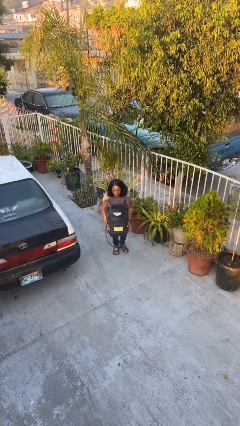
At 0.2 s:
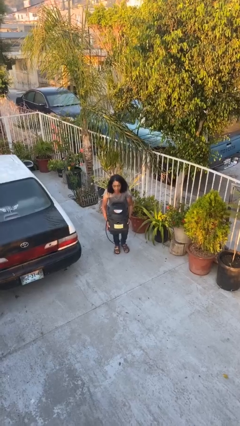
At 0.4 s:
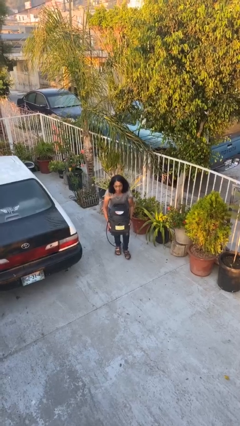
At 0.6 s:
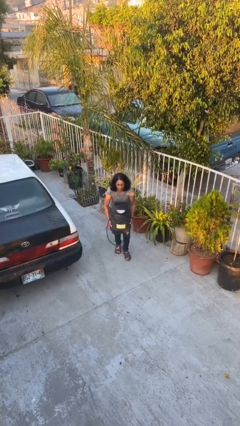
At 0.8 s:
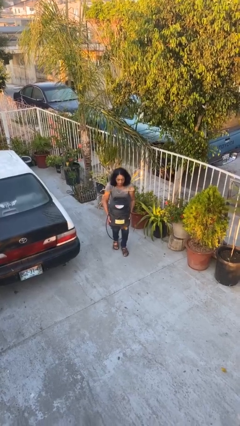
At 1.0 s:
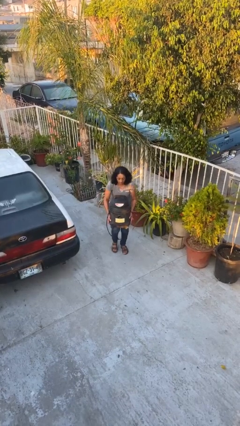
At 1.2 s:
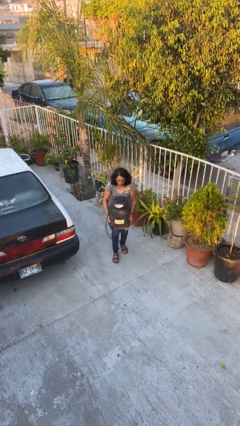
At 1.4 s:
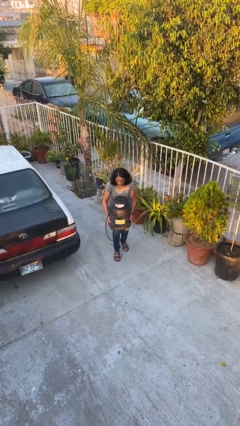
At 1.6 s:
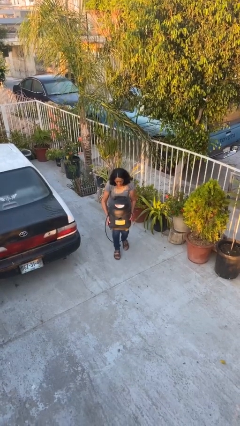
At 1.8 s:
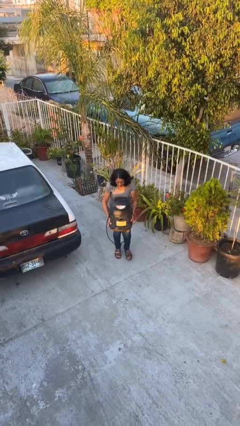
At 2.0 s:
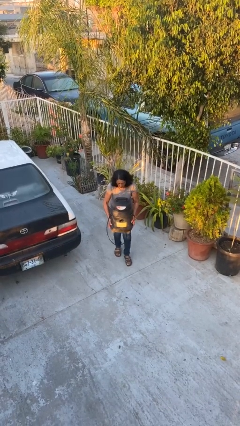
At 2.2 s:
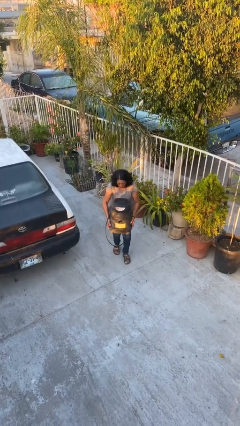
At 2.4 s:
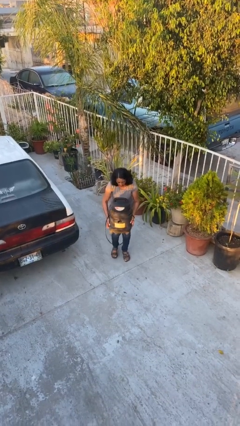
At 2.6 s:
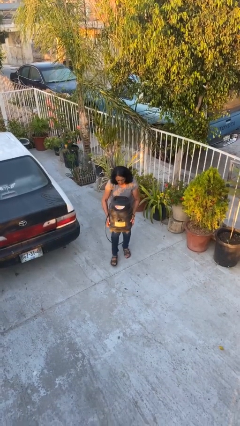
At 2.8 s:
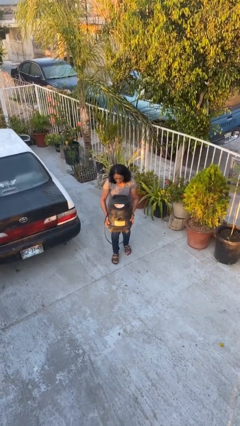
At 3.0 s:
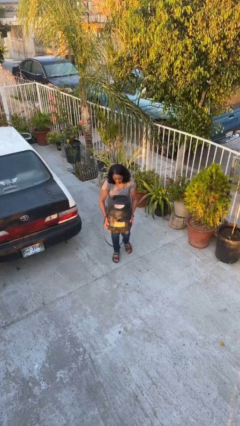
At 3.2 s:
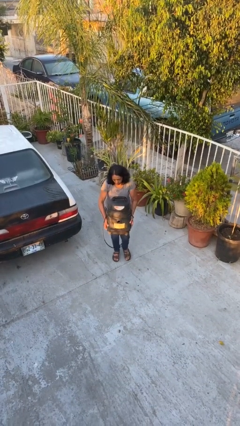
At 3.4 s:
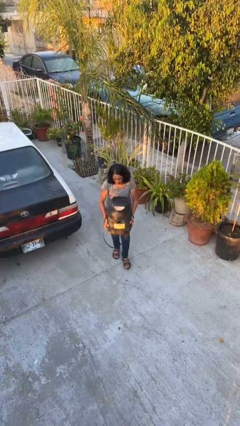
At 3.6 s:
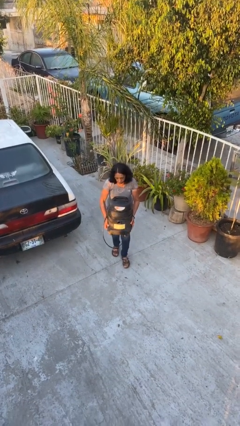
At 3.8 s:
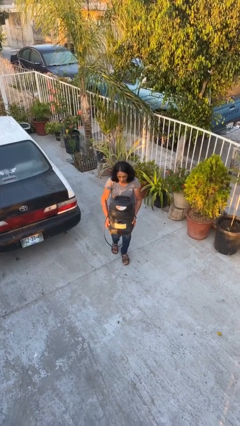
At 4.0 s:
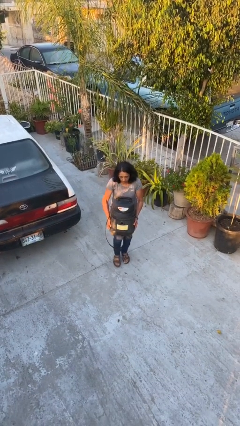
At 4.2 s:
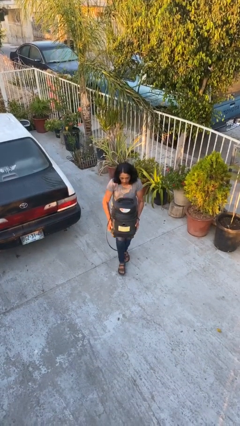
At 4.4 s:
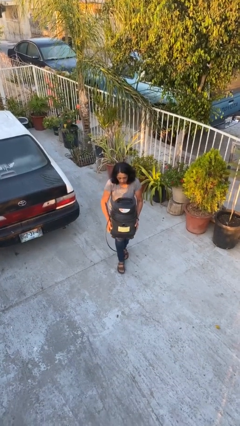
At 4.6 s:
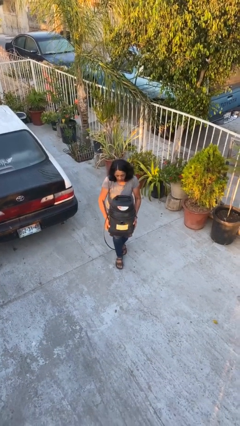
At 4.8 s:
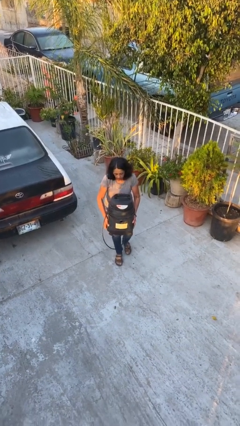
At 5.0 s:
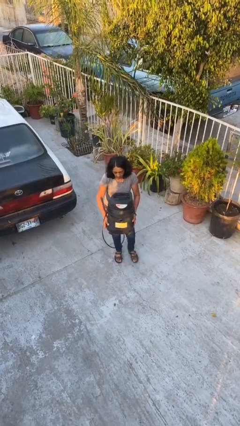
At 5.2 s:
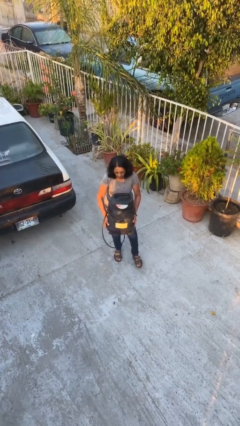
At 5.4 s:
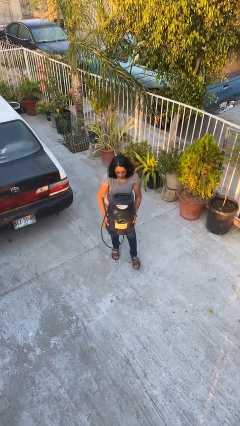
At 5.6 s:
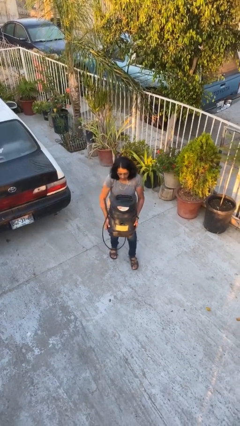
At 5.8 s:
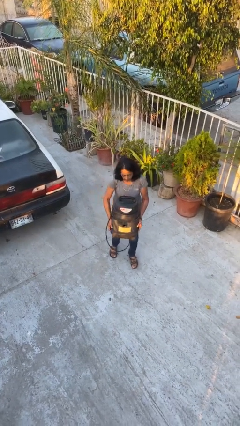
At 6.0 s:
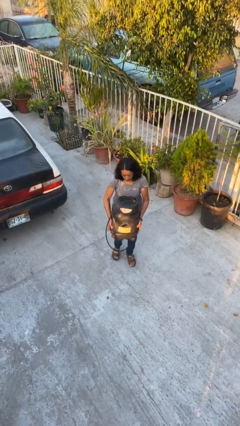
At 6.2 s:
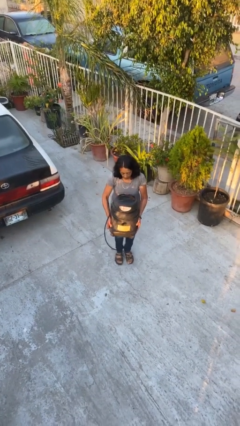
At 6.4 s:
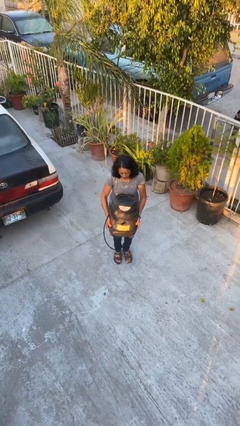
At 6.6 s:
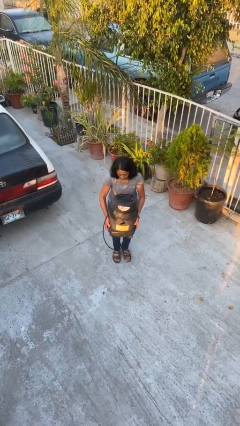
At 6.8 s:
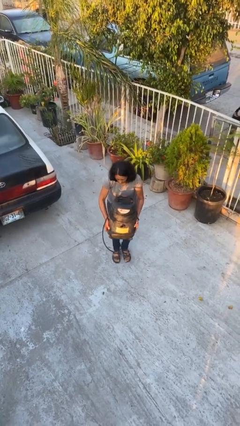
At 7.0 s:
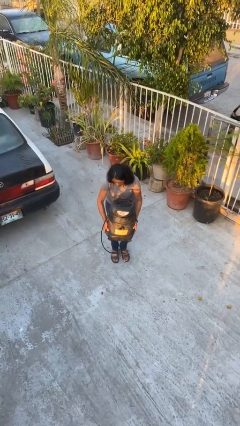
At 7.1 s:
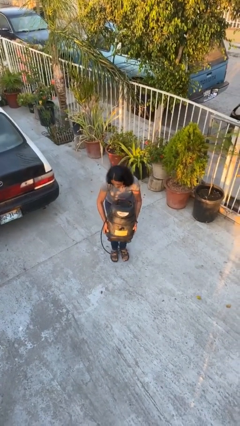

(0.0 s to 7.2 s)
person carries heavy object

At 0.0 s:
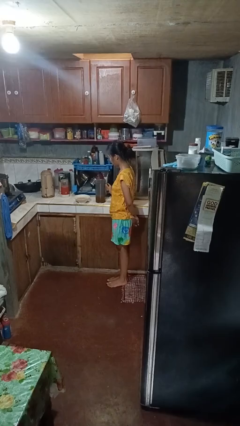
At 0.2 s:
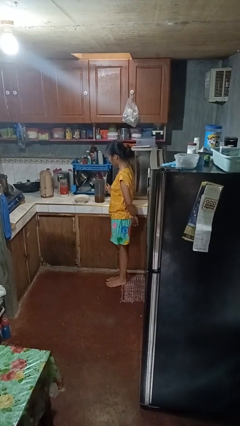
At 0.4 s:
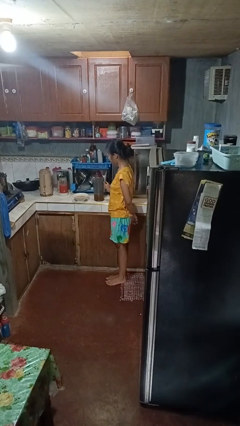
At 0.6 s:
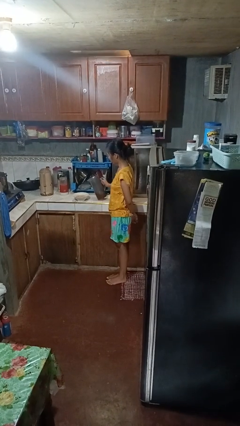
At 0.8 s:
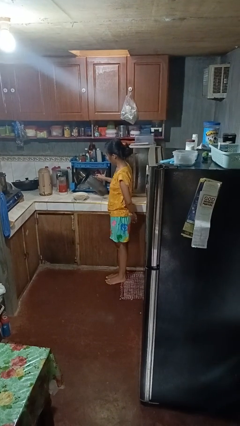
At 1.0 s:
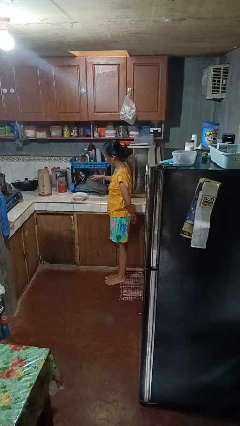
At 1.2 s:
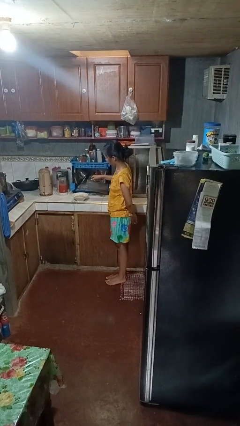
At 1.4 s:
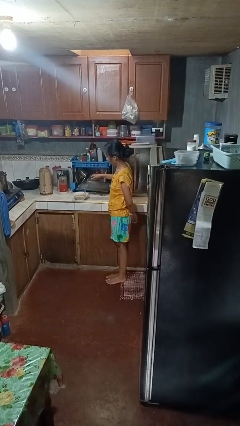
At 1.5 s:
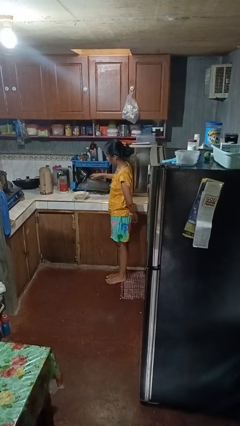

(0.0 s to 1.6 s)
person pours into bowl

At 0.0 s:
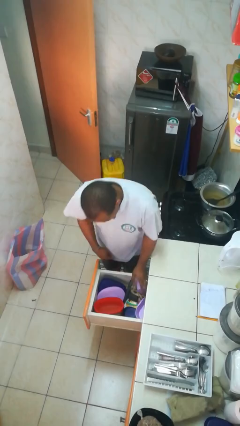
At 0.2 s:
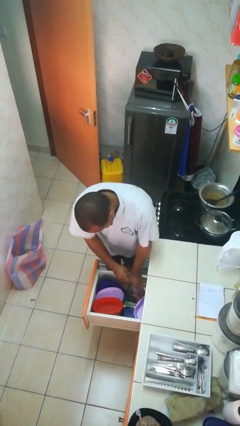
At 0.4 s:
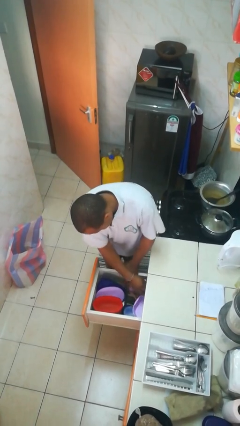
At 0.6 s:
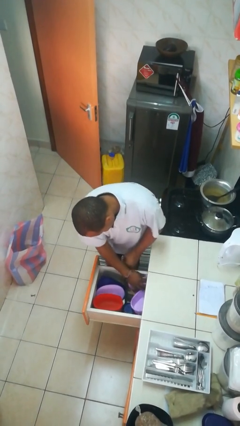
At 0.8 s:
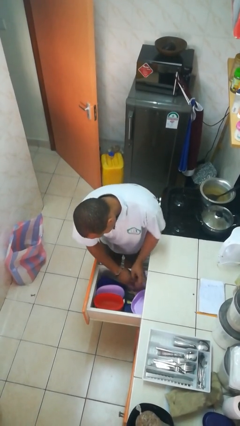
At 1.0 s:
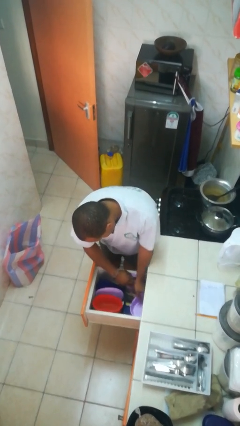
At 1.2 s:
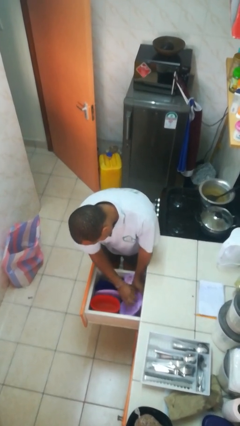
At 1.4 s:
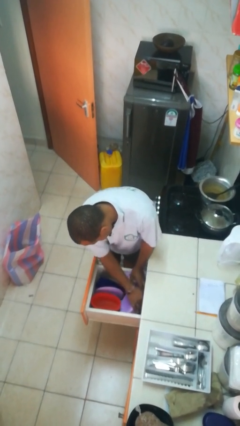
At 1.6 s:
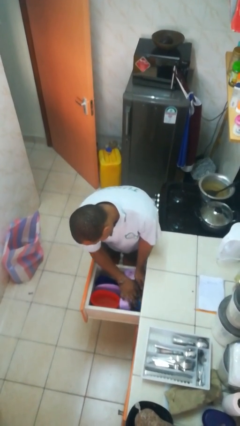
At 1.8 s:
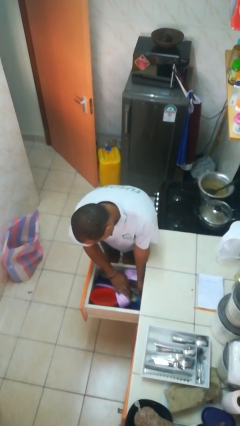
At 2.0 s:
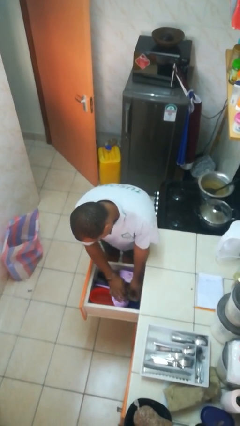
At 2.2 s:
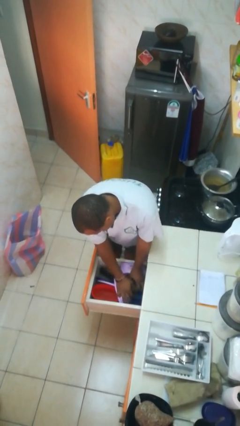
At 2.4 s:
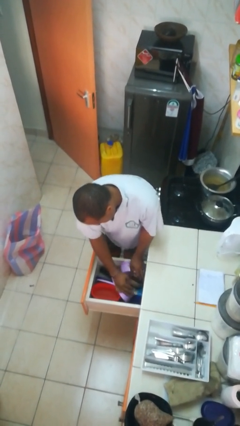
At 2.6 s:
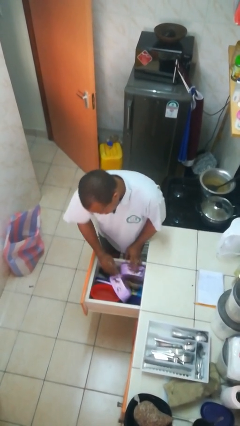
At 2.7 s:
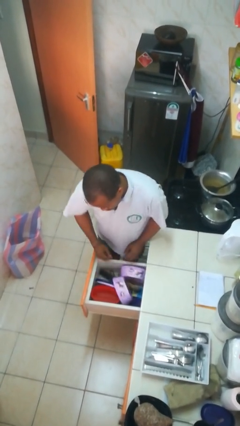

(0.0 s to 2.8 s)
person searches in kitchen drawer

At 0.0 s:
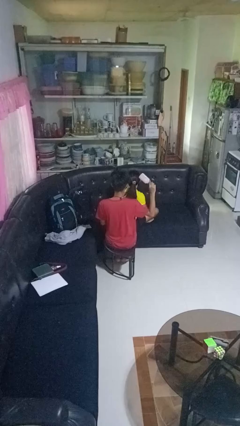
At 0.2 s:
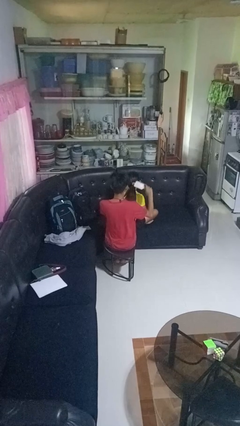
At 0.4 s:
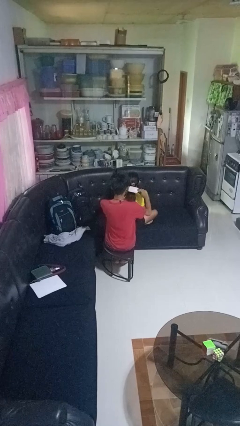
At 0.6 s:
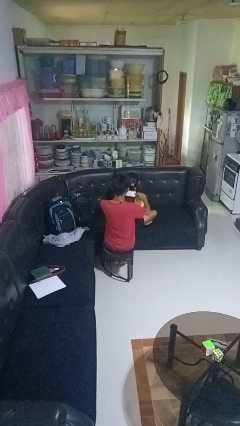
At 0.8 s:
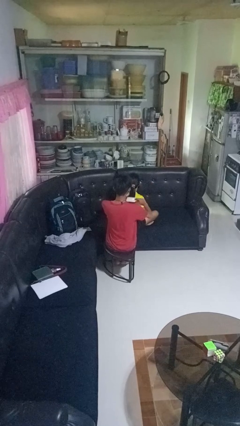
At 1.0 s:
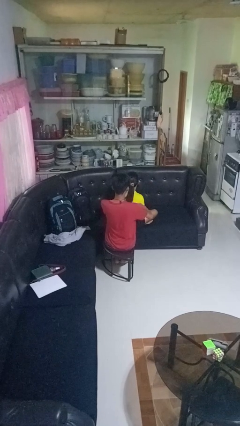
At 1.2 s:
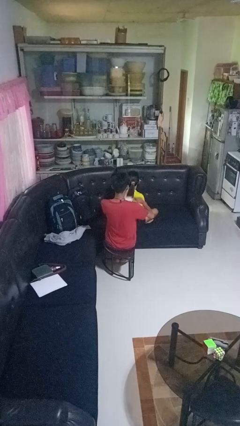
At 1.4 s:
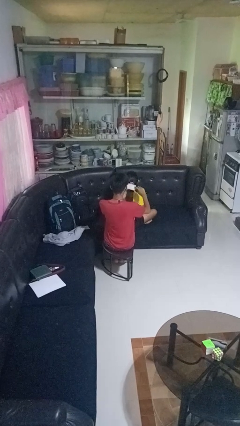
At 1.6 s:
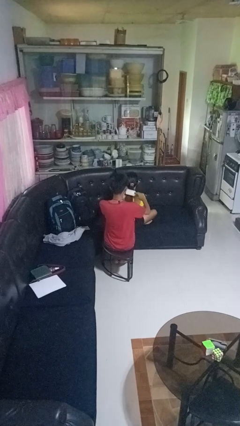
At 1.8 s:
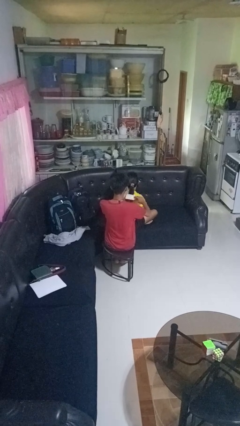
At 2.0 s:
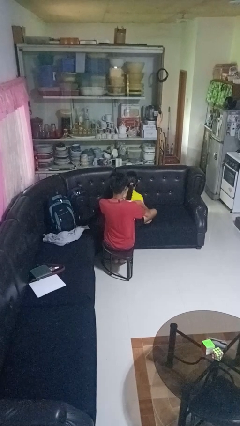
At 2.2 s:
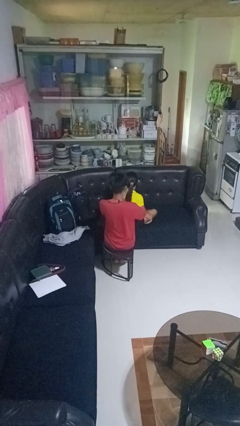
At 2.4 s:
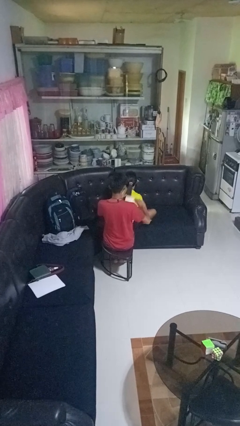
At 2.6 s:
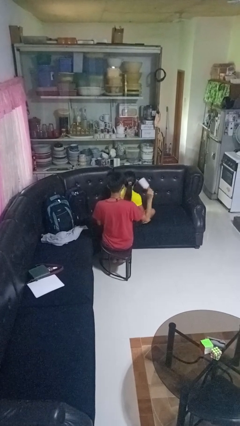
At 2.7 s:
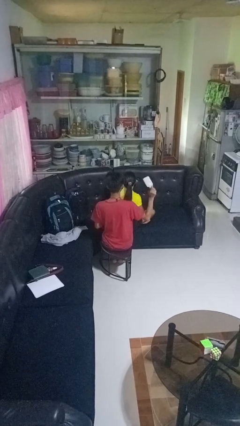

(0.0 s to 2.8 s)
person brushes hair of person

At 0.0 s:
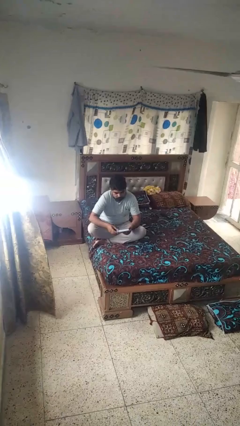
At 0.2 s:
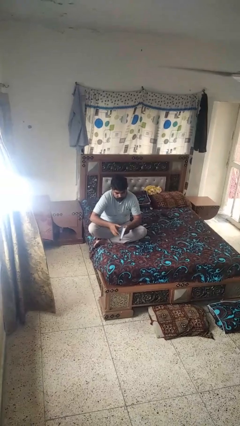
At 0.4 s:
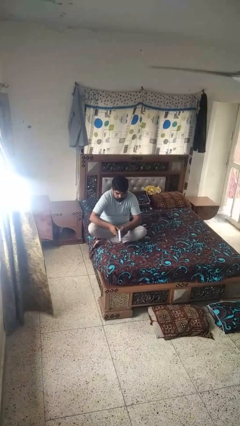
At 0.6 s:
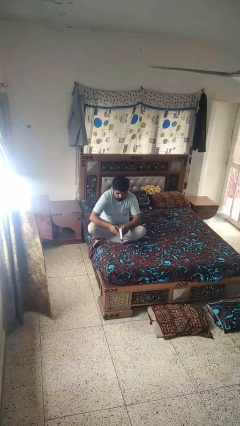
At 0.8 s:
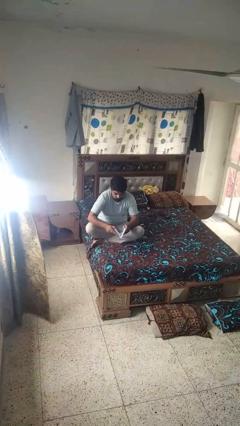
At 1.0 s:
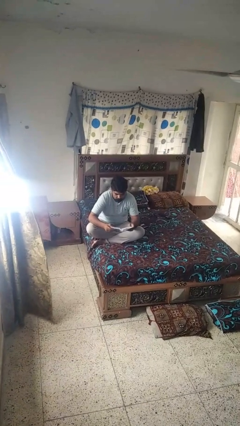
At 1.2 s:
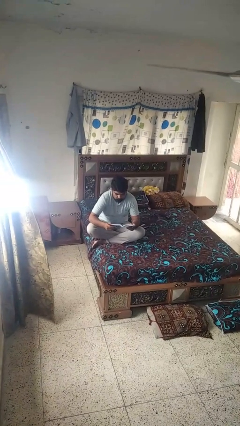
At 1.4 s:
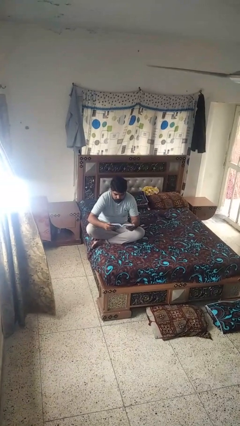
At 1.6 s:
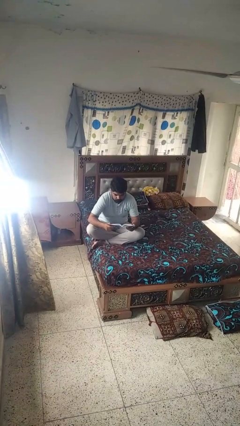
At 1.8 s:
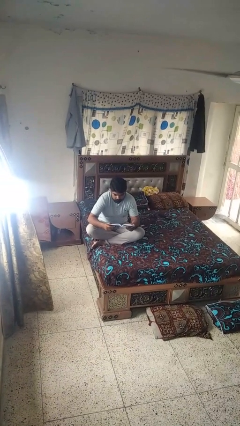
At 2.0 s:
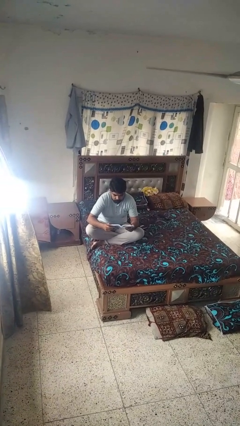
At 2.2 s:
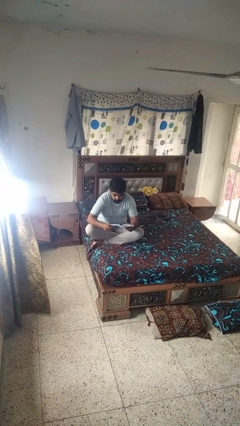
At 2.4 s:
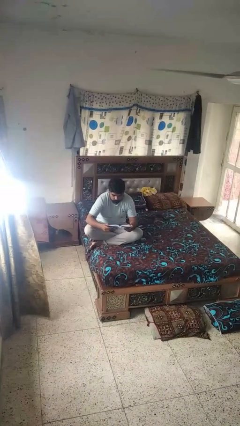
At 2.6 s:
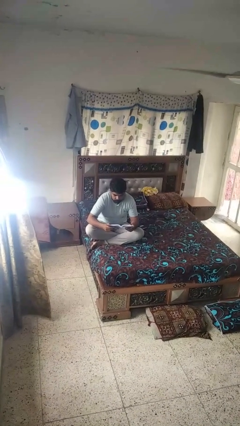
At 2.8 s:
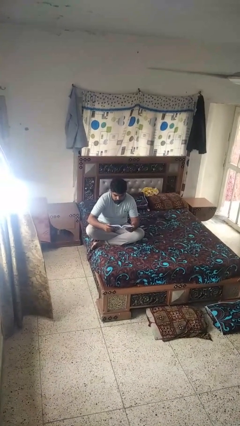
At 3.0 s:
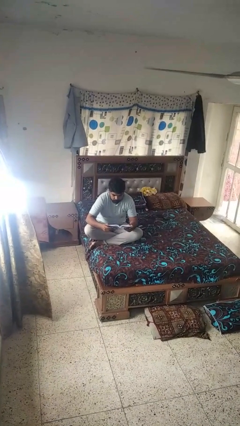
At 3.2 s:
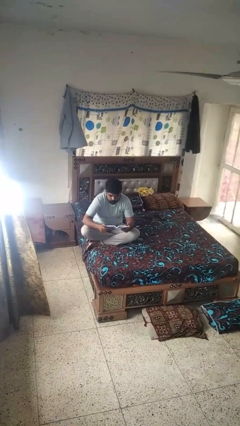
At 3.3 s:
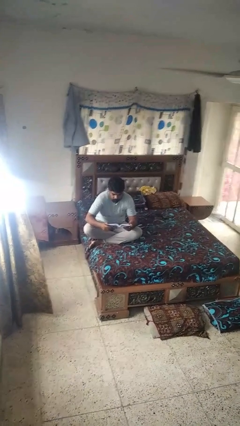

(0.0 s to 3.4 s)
person reads book
